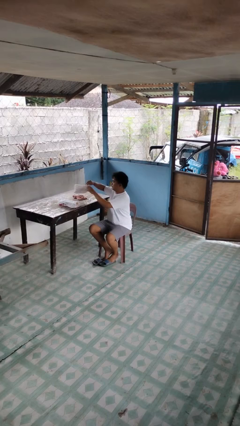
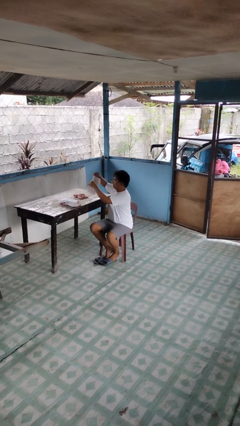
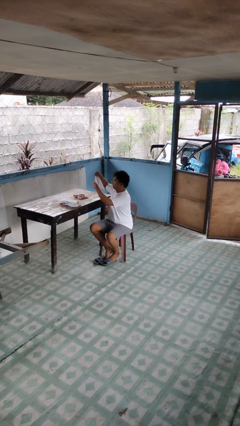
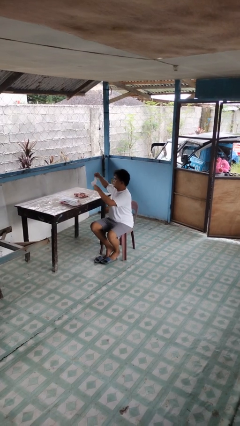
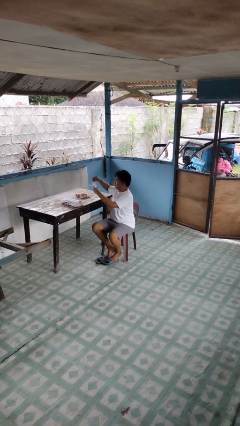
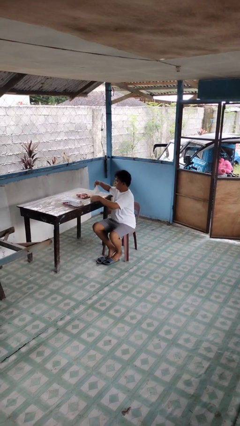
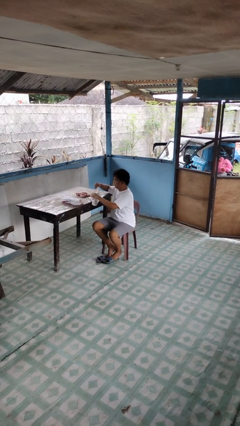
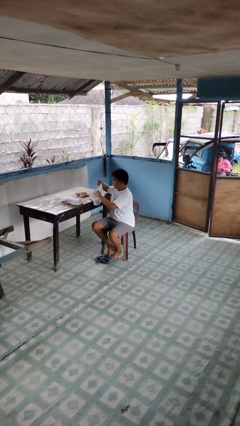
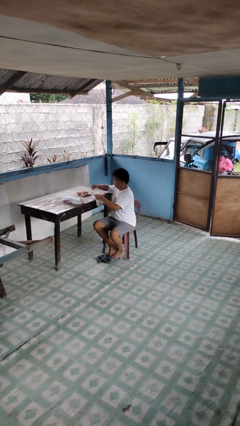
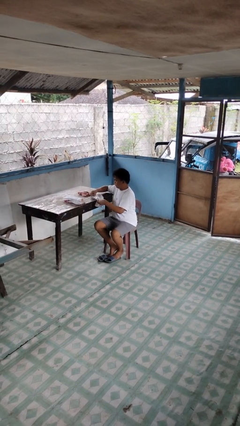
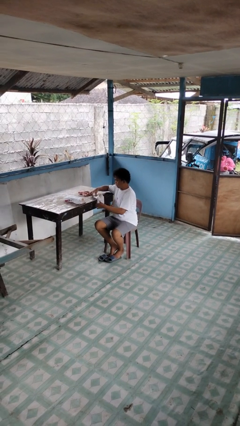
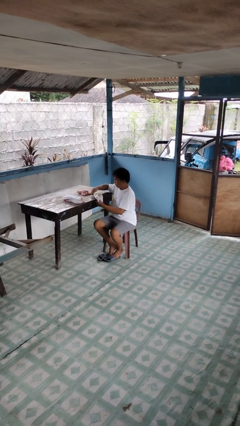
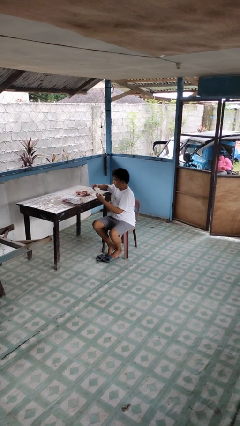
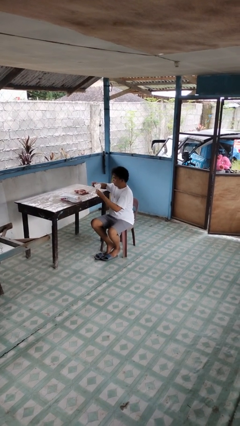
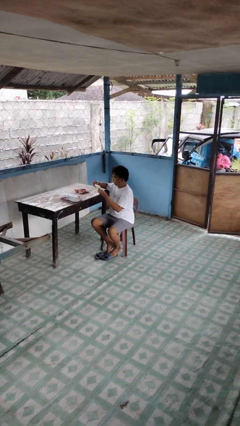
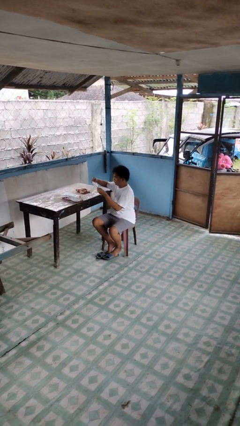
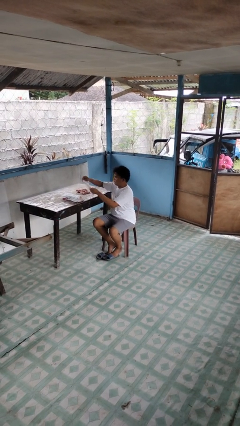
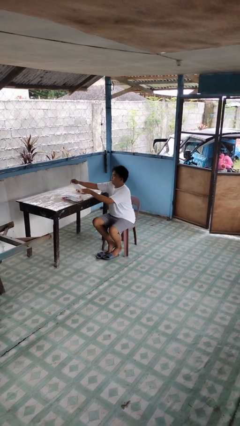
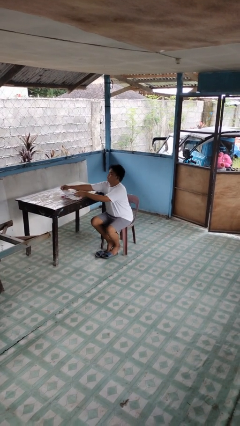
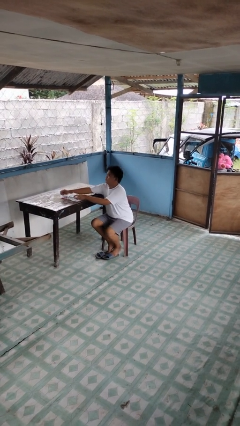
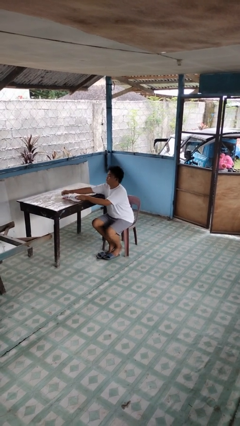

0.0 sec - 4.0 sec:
person folds towel

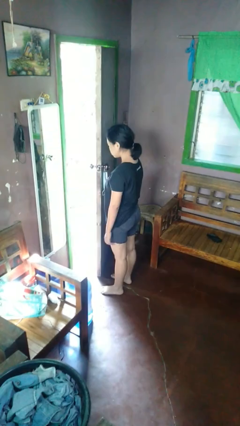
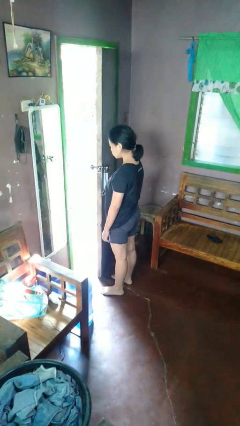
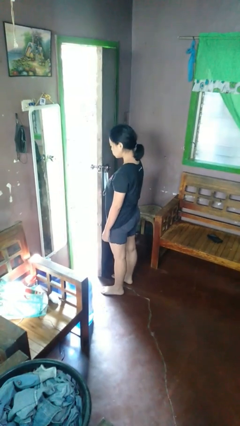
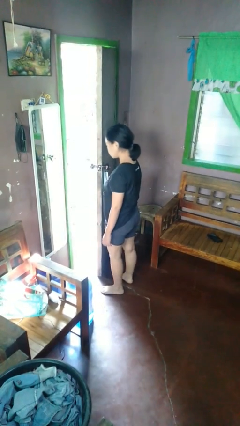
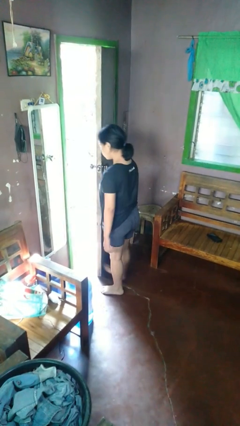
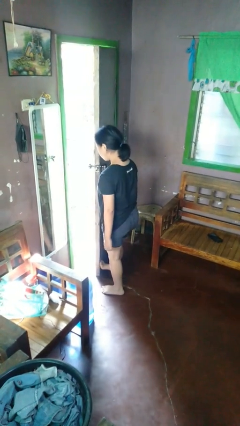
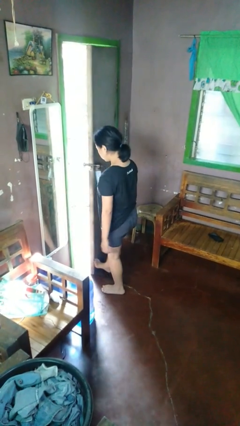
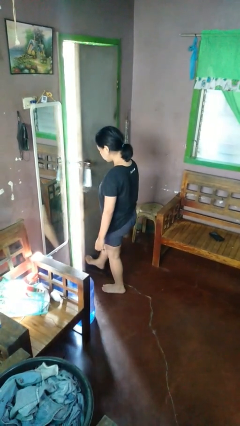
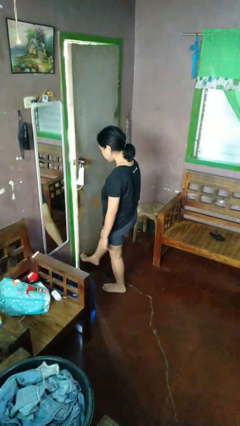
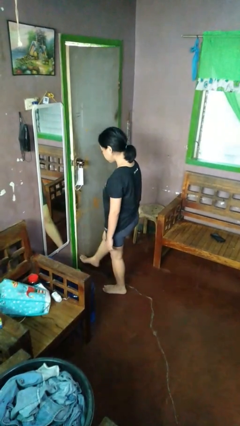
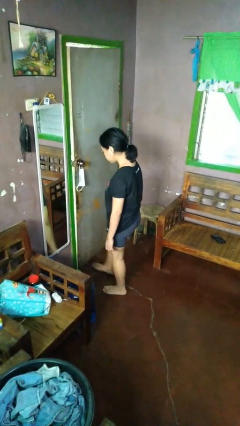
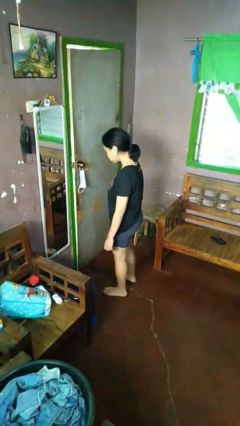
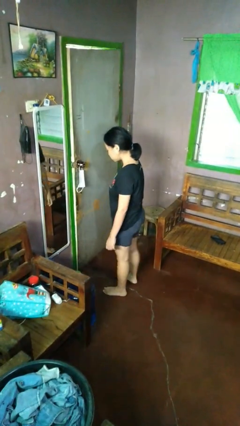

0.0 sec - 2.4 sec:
person closes door with foot

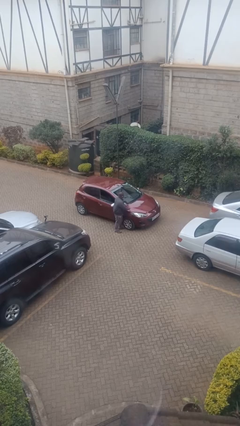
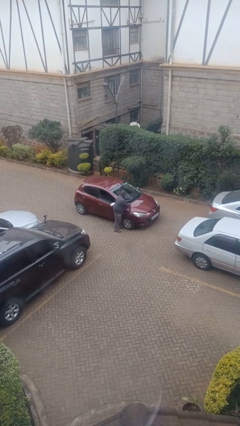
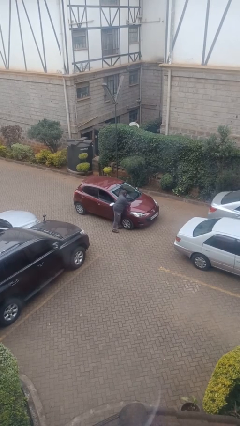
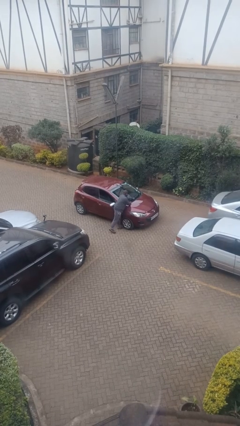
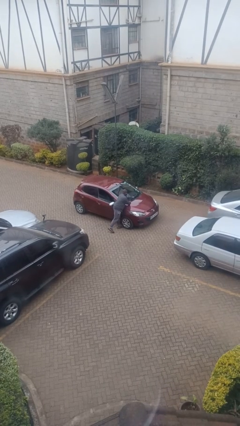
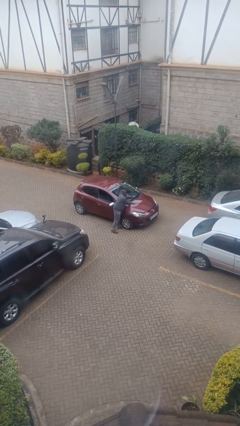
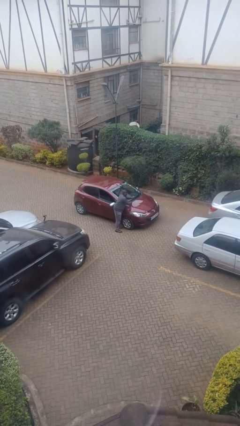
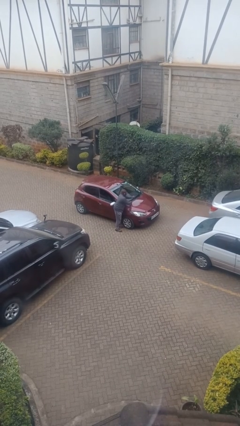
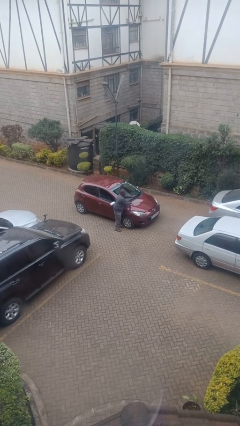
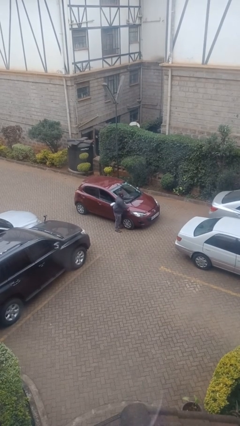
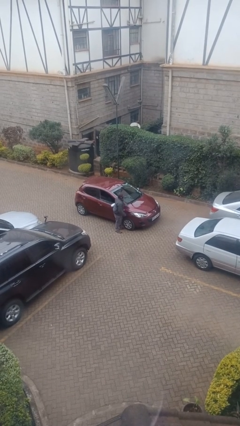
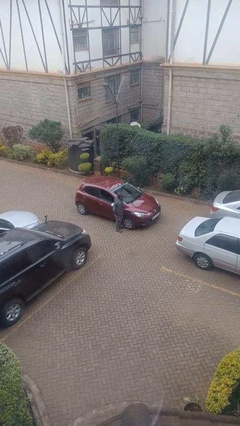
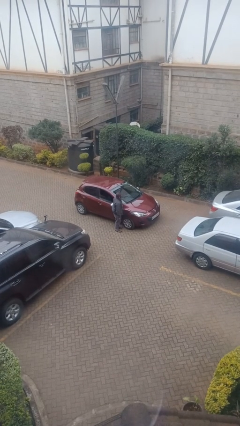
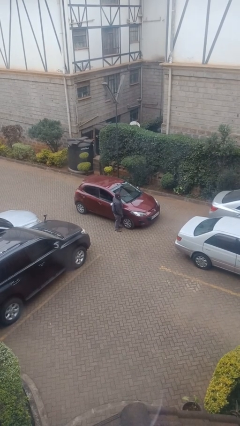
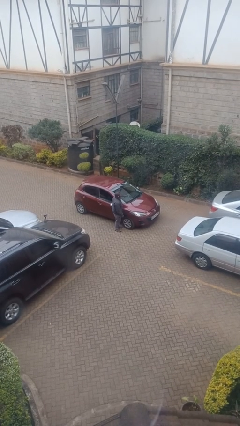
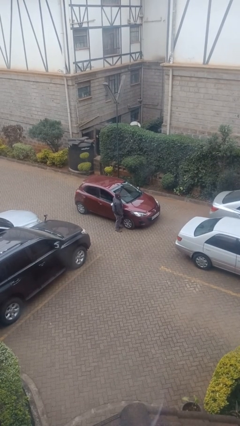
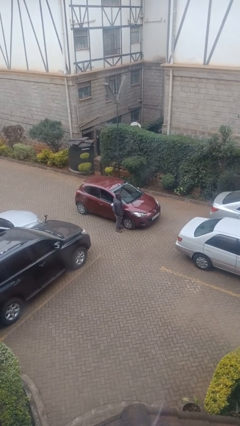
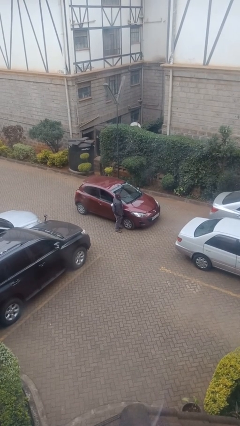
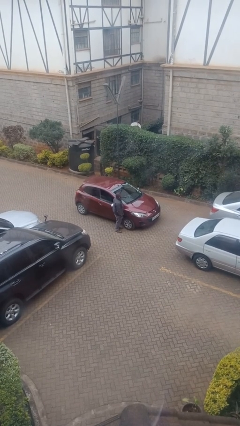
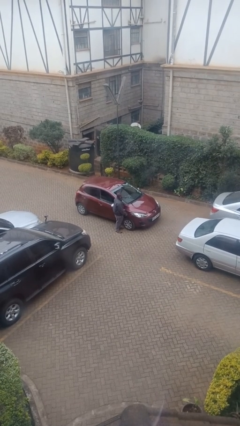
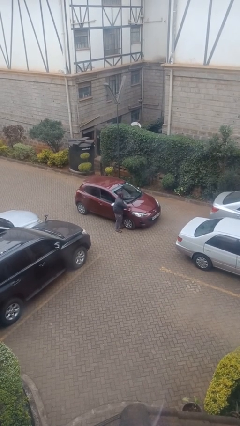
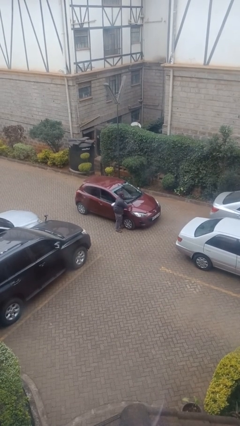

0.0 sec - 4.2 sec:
person flips up car wipers

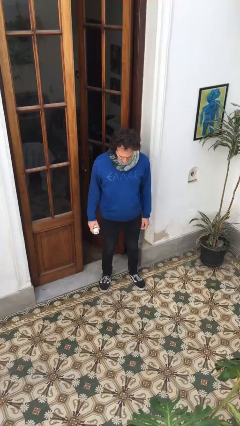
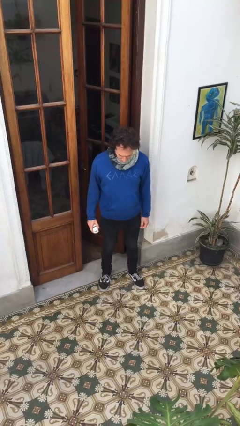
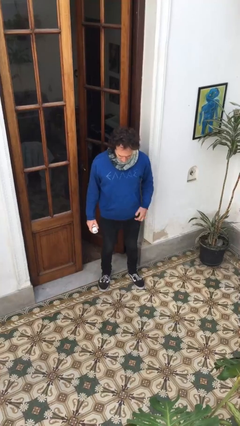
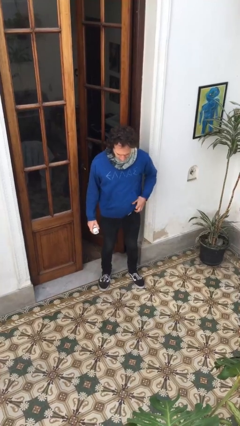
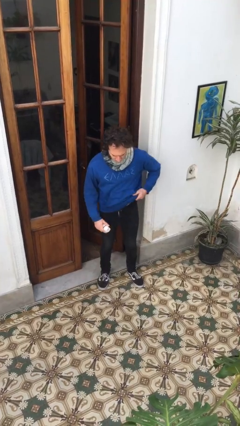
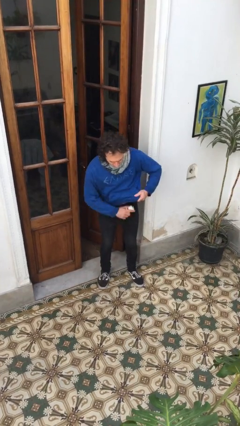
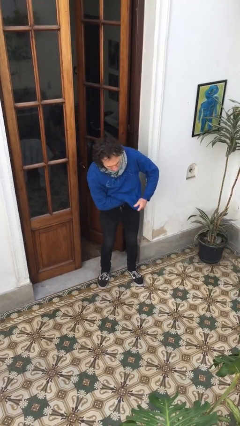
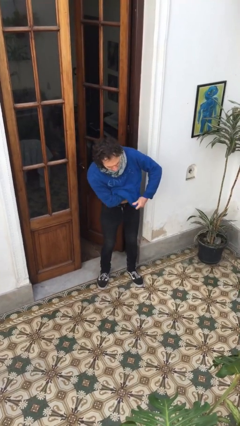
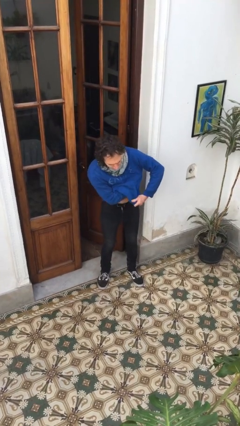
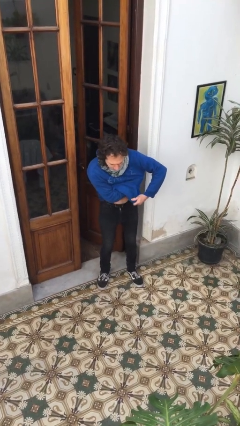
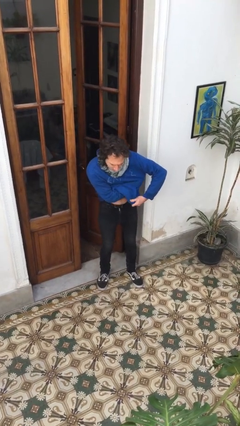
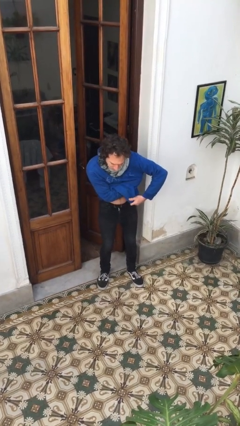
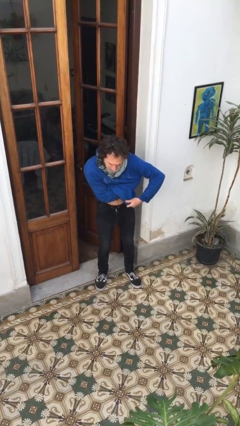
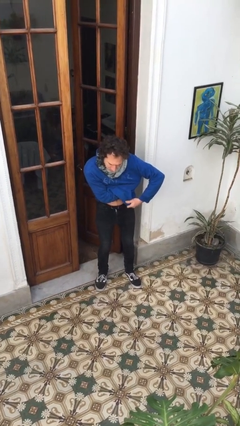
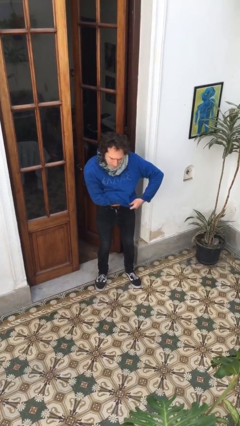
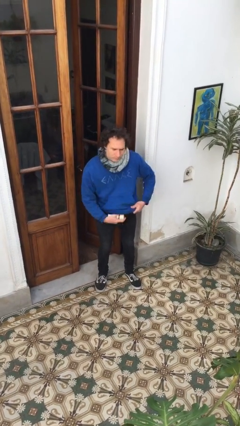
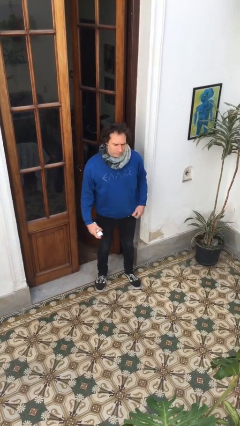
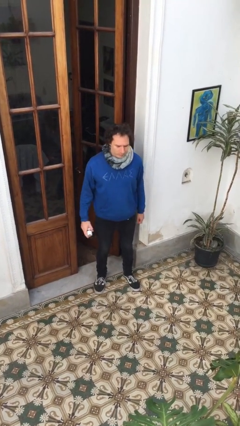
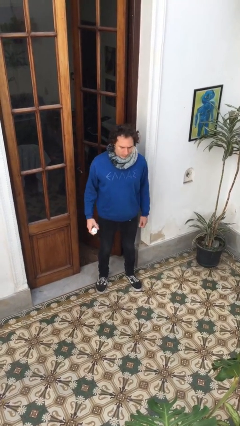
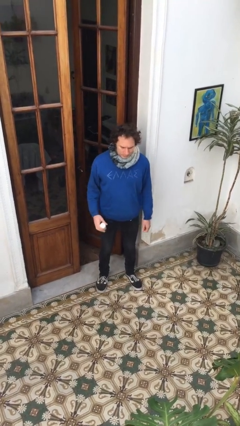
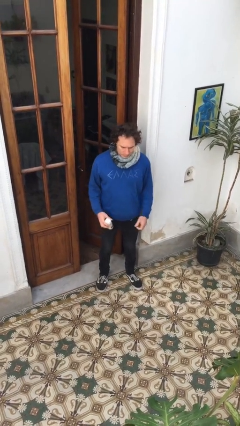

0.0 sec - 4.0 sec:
person applies deodorant

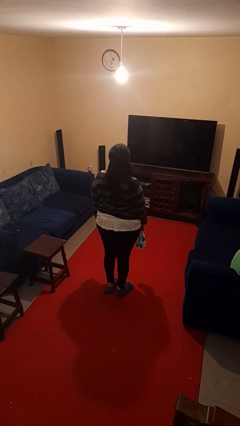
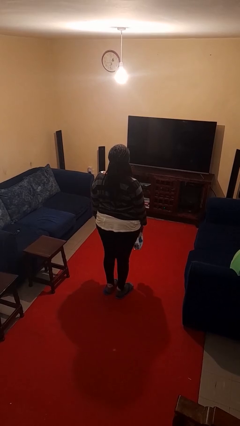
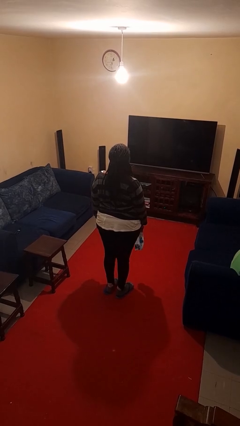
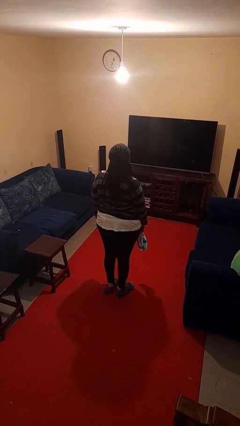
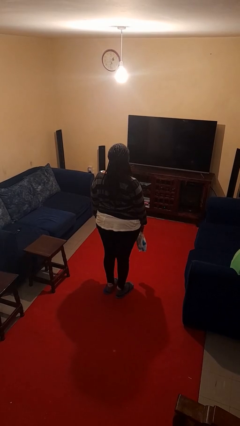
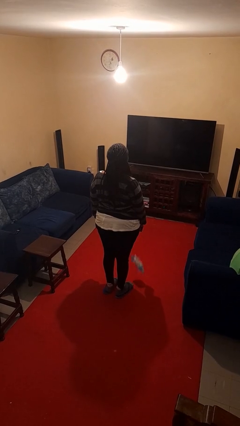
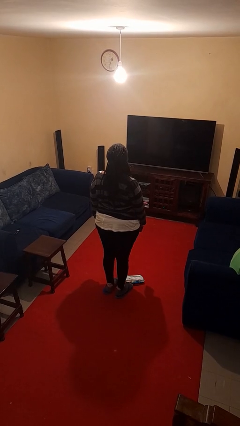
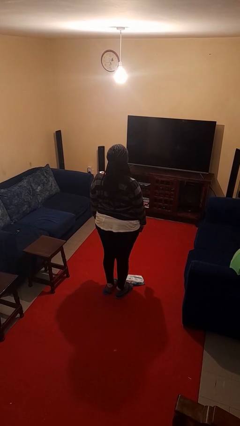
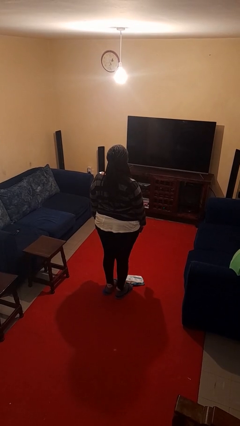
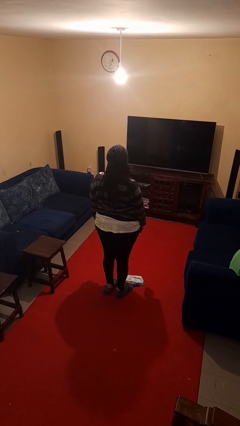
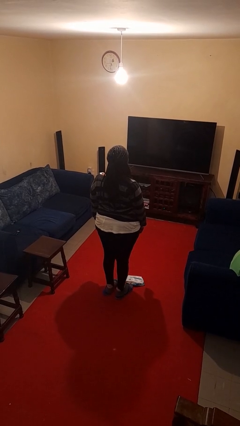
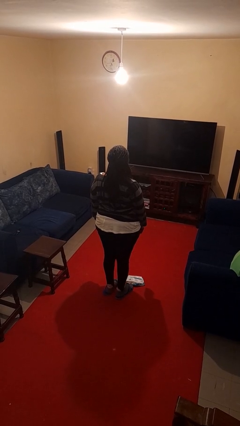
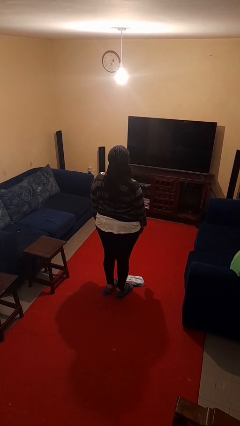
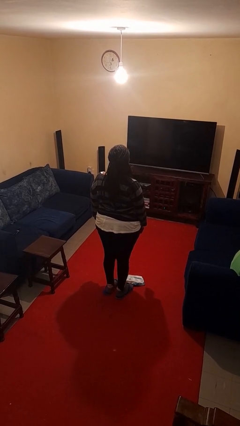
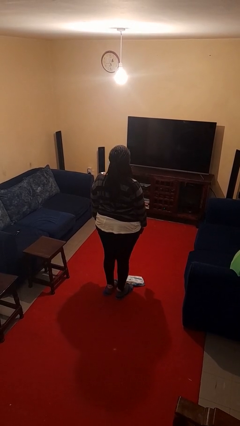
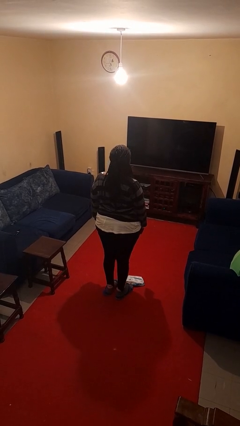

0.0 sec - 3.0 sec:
person drops object
